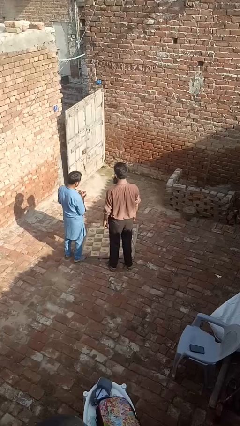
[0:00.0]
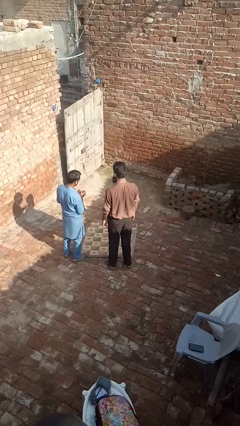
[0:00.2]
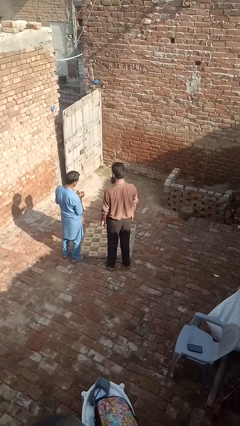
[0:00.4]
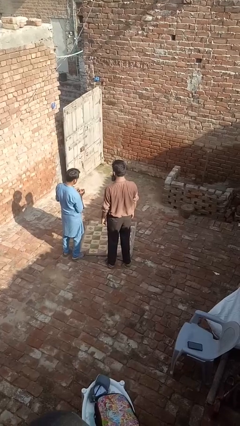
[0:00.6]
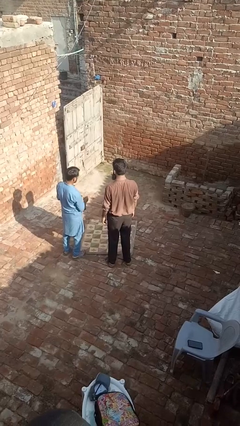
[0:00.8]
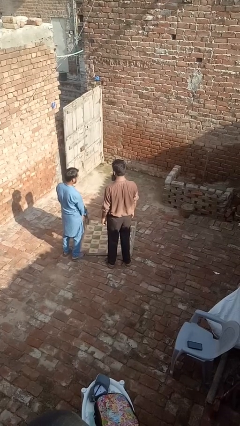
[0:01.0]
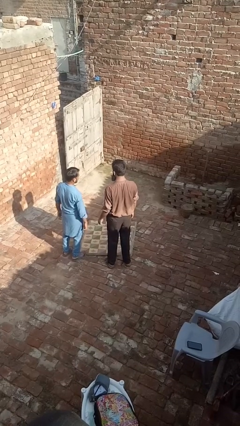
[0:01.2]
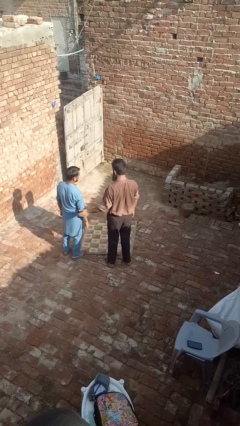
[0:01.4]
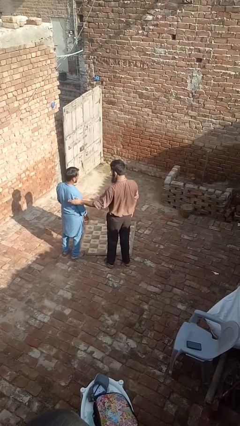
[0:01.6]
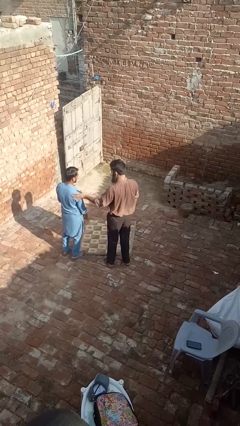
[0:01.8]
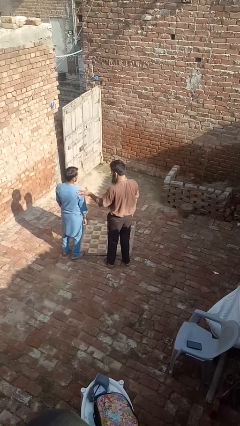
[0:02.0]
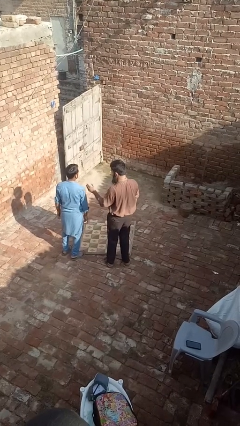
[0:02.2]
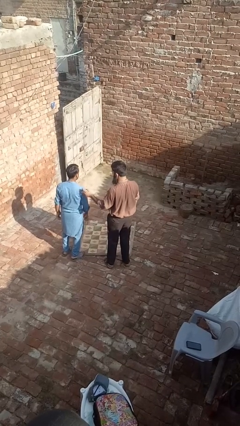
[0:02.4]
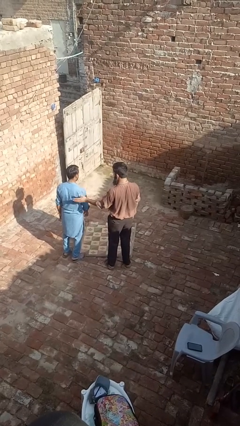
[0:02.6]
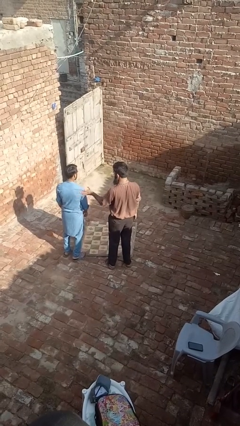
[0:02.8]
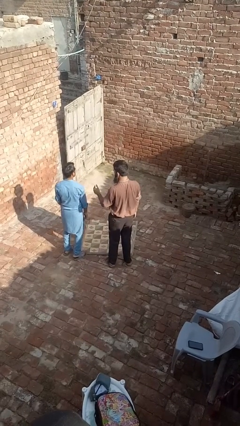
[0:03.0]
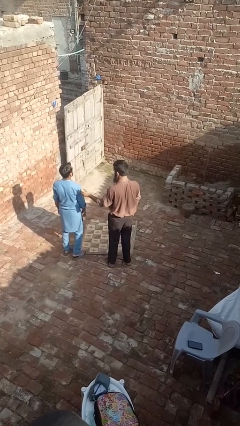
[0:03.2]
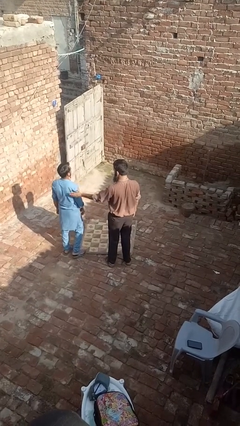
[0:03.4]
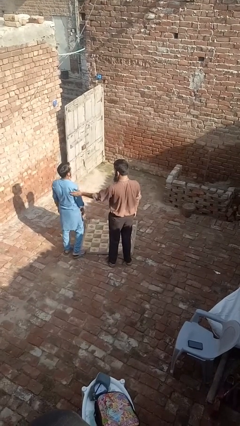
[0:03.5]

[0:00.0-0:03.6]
person shoves person

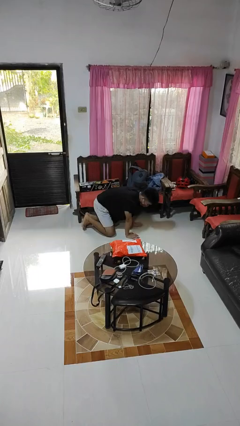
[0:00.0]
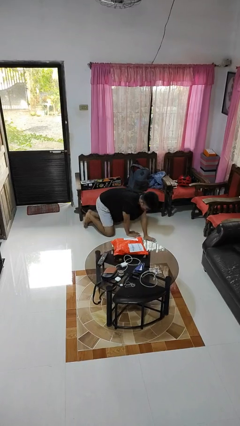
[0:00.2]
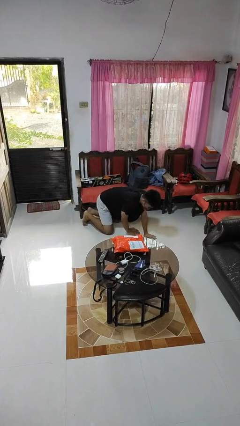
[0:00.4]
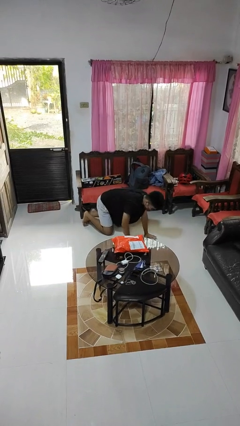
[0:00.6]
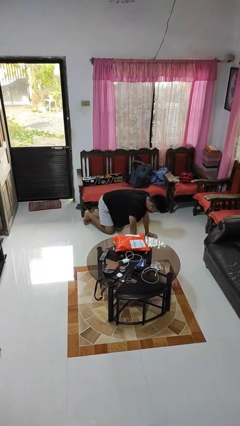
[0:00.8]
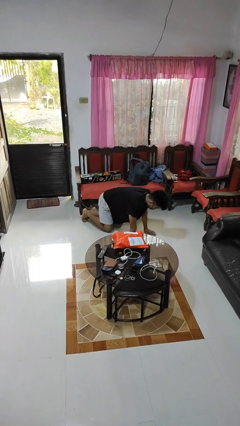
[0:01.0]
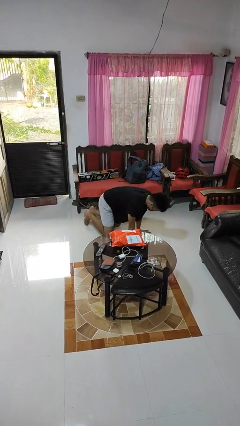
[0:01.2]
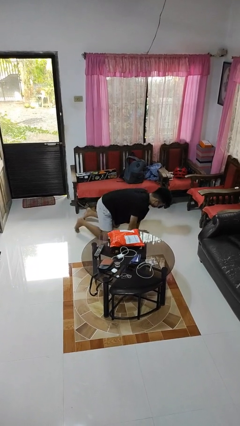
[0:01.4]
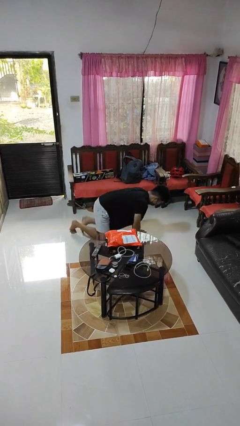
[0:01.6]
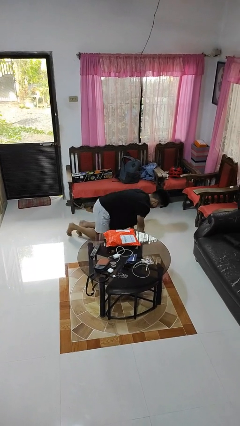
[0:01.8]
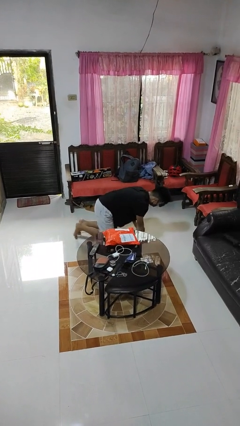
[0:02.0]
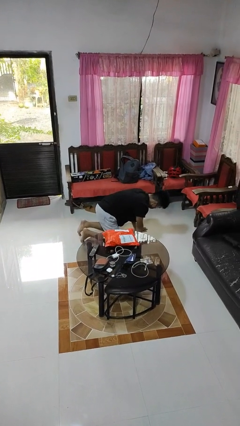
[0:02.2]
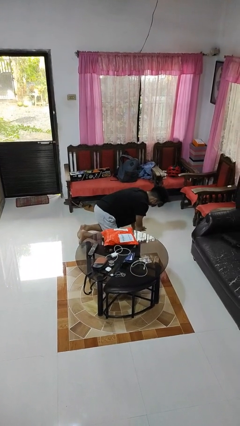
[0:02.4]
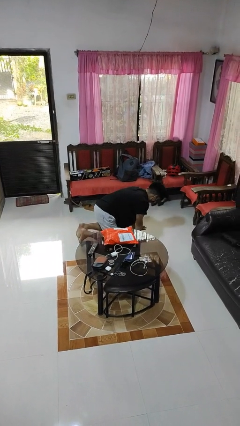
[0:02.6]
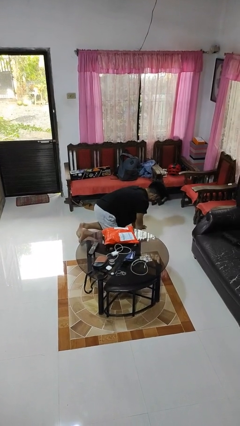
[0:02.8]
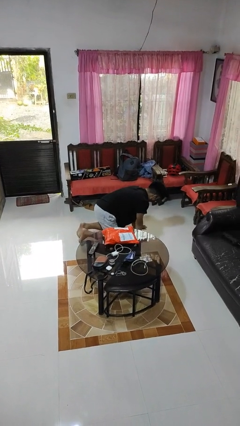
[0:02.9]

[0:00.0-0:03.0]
person crawls

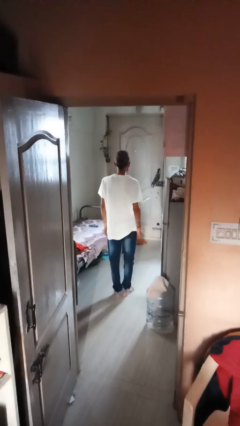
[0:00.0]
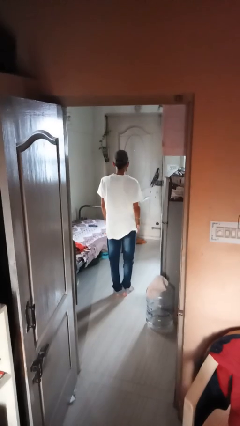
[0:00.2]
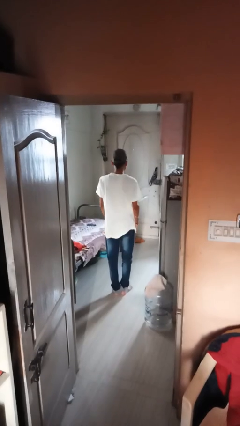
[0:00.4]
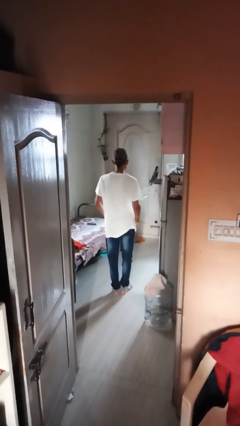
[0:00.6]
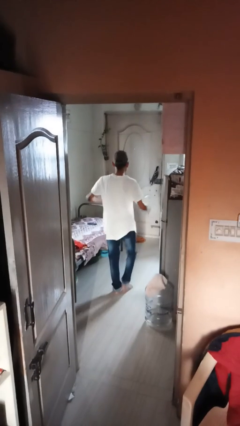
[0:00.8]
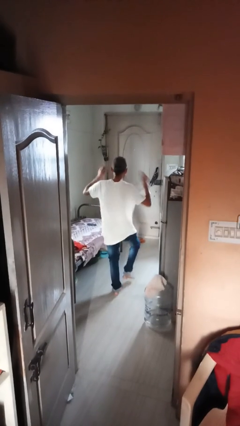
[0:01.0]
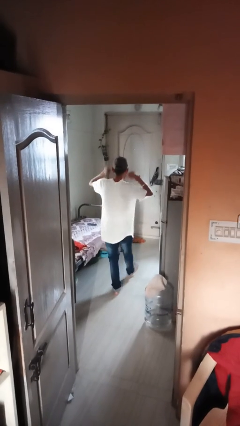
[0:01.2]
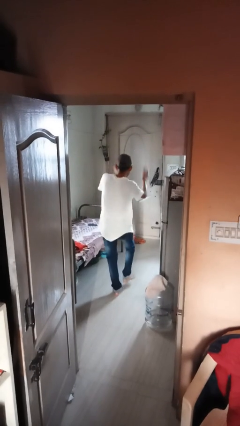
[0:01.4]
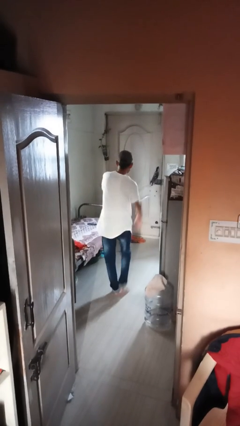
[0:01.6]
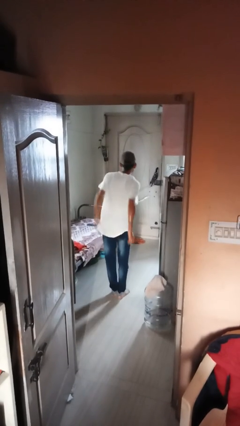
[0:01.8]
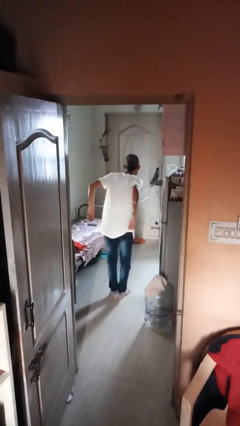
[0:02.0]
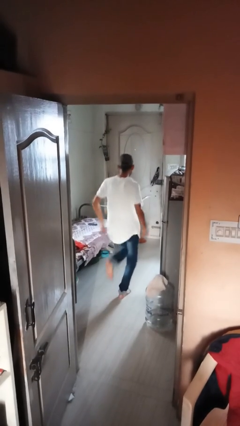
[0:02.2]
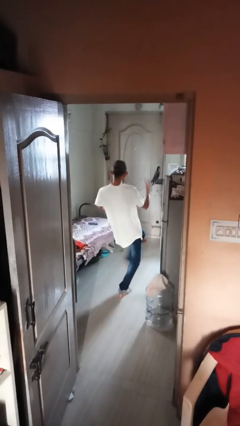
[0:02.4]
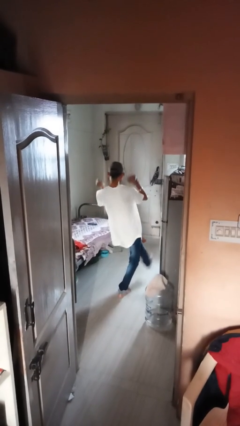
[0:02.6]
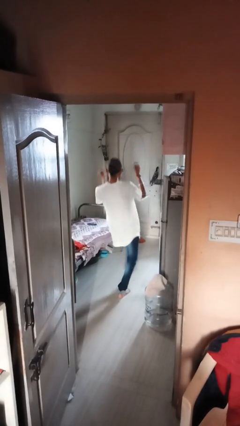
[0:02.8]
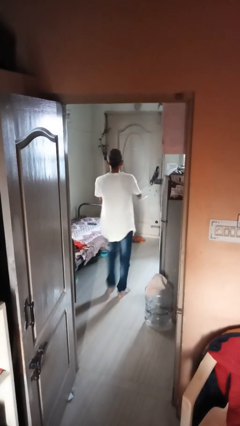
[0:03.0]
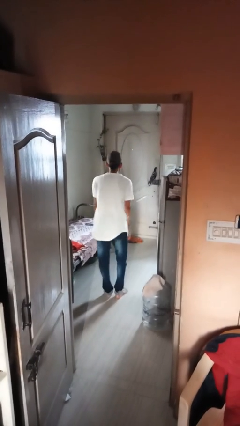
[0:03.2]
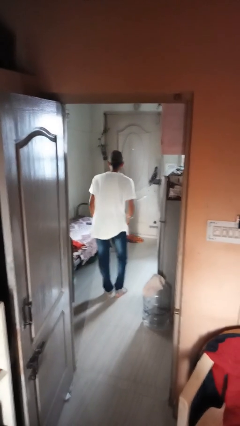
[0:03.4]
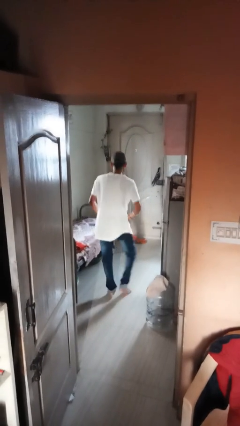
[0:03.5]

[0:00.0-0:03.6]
person dances in place

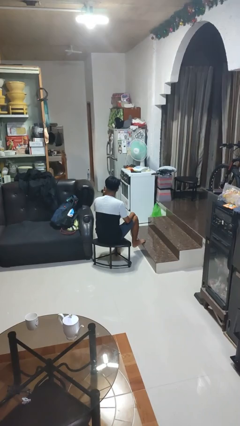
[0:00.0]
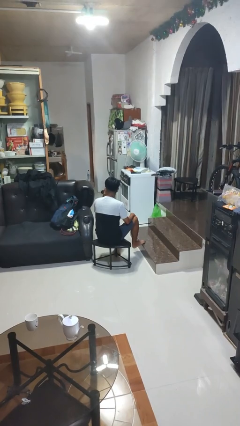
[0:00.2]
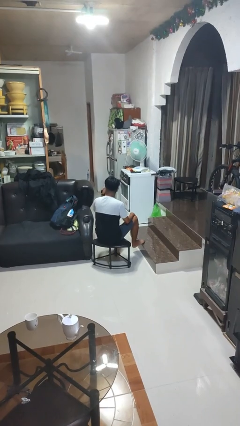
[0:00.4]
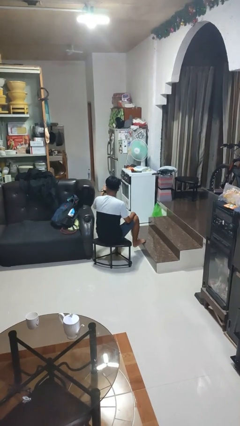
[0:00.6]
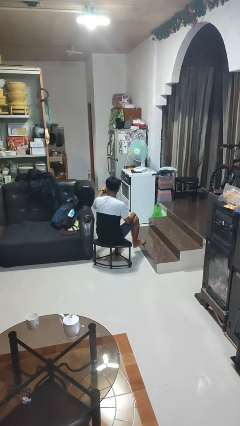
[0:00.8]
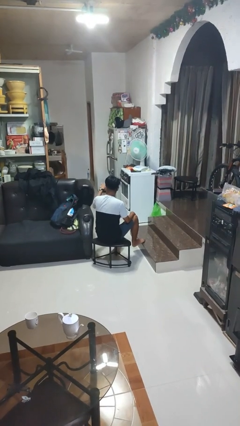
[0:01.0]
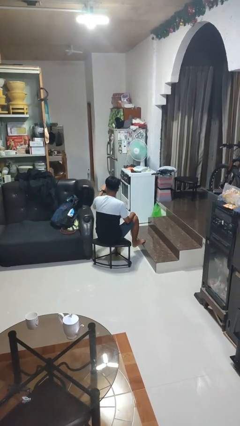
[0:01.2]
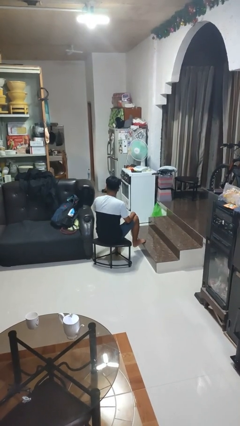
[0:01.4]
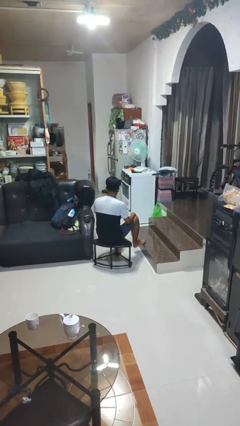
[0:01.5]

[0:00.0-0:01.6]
person gestures watch closely

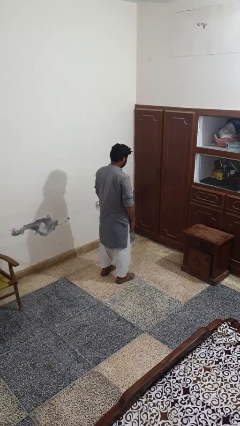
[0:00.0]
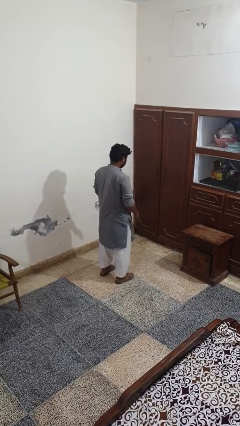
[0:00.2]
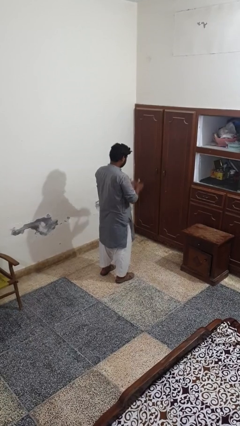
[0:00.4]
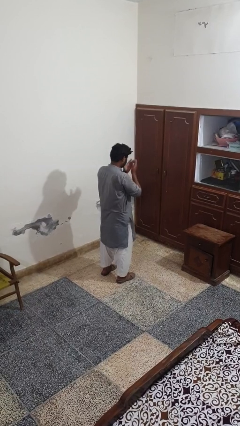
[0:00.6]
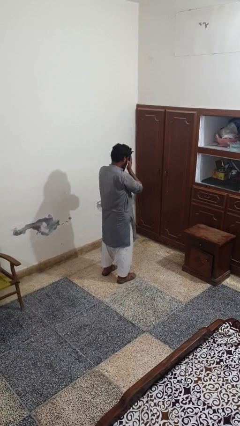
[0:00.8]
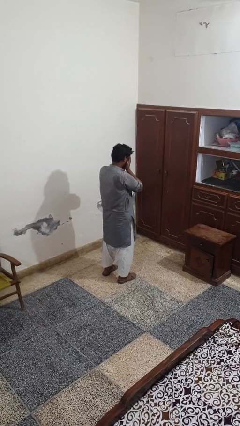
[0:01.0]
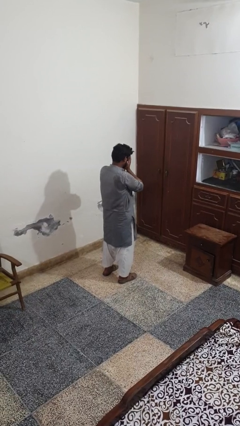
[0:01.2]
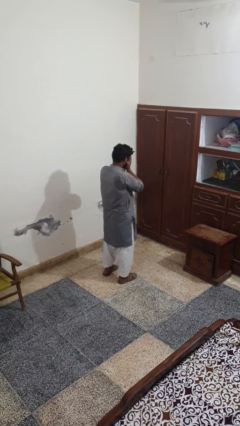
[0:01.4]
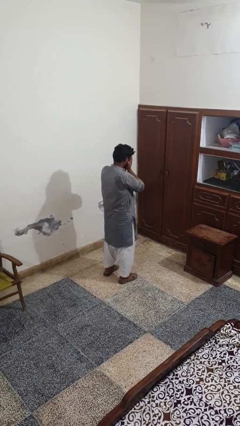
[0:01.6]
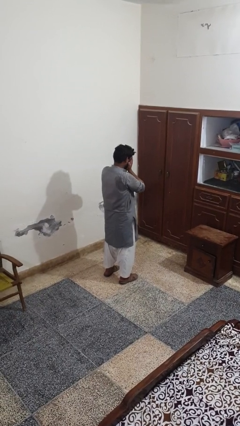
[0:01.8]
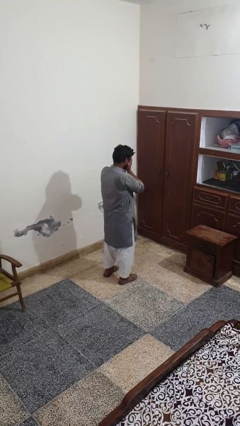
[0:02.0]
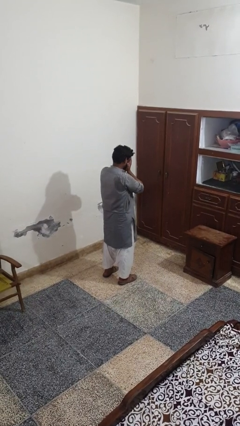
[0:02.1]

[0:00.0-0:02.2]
person covers face with hands

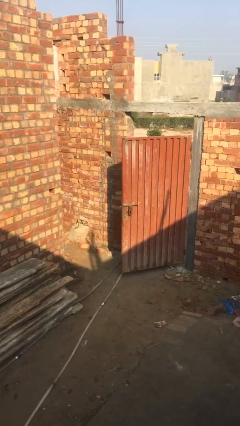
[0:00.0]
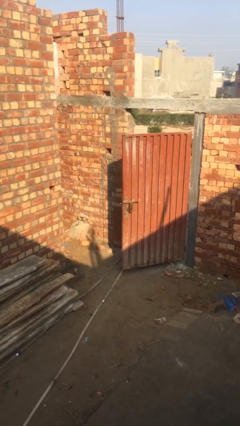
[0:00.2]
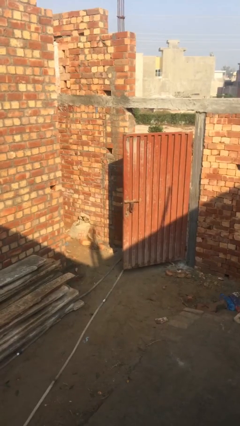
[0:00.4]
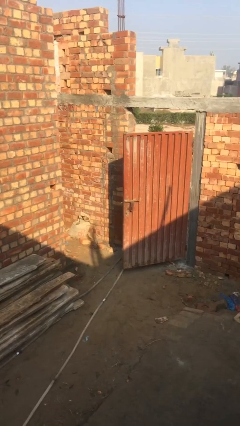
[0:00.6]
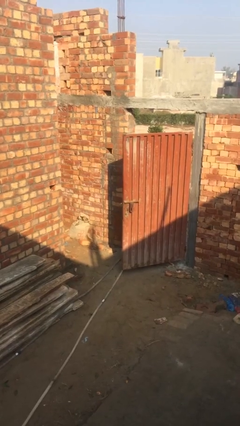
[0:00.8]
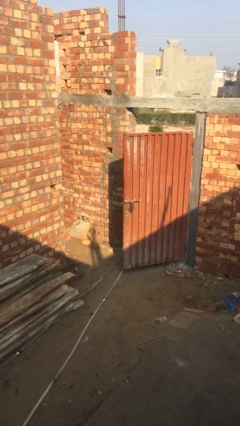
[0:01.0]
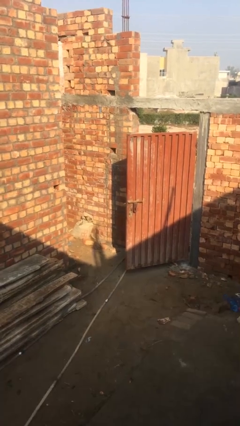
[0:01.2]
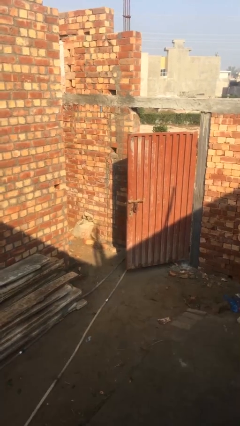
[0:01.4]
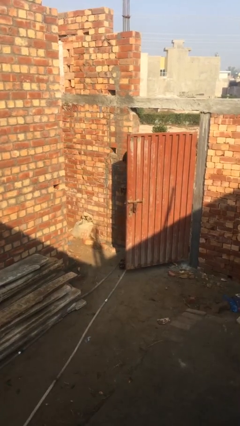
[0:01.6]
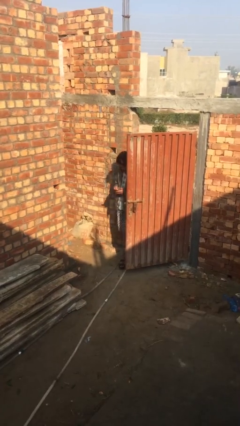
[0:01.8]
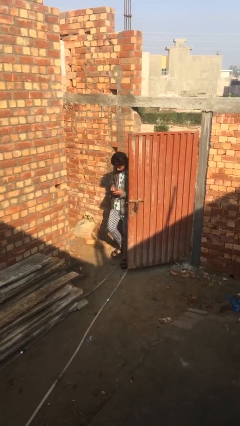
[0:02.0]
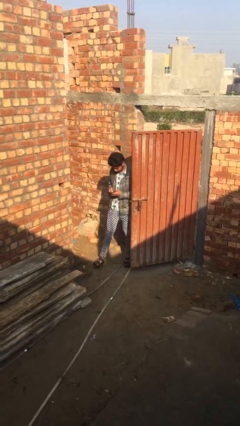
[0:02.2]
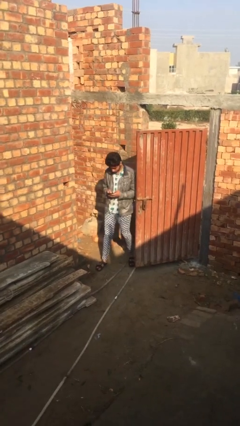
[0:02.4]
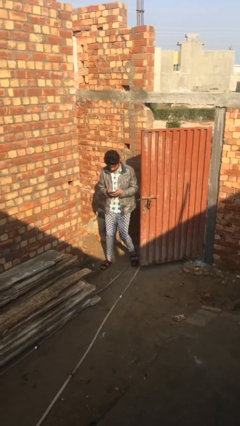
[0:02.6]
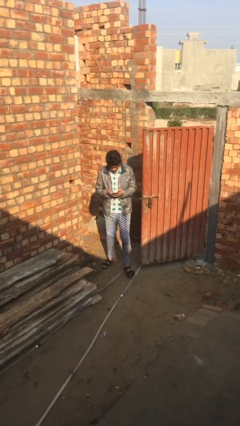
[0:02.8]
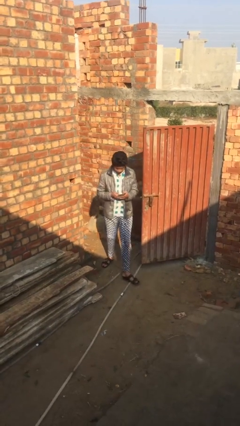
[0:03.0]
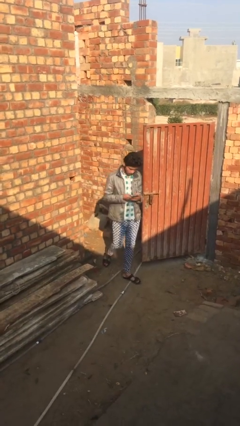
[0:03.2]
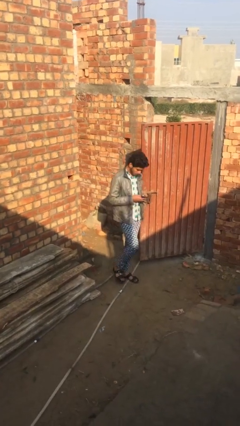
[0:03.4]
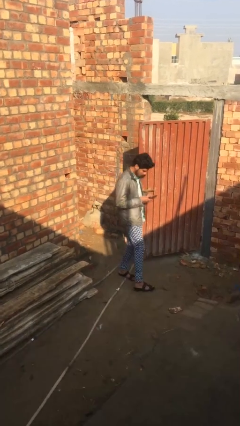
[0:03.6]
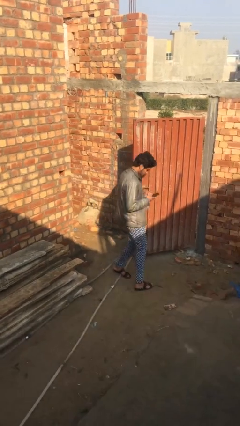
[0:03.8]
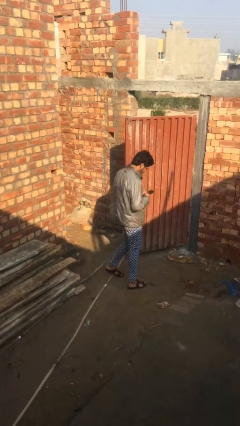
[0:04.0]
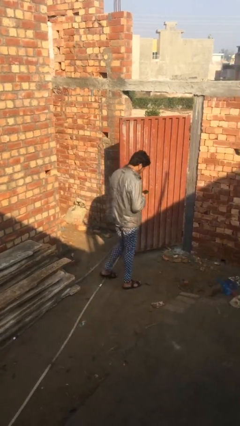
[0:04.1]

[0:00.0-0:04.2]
person enters scene through structure
